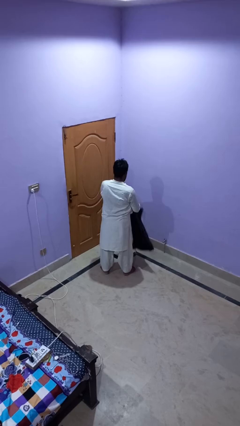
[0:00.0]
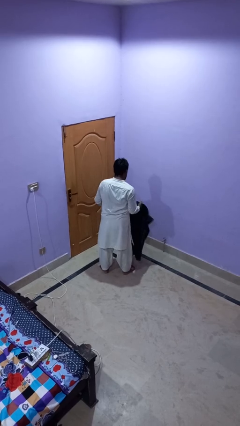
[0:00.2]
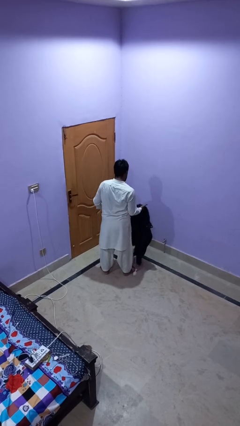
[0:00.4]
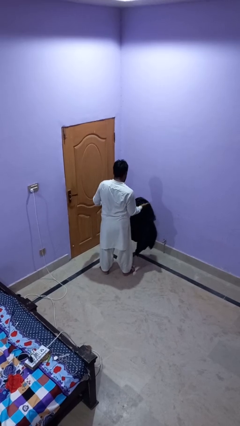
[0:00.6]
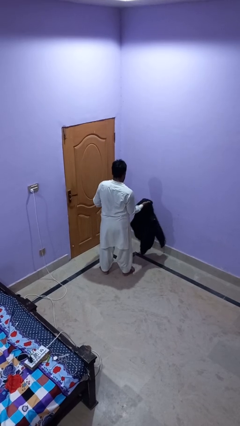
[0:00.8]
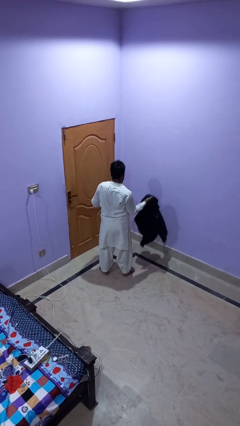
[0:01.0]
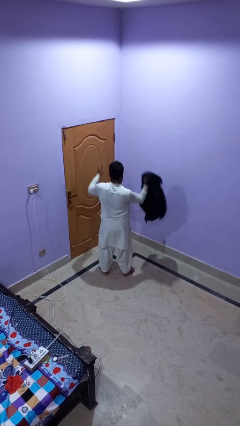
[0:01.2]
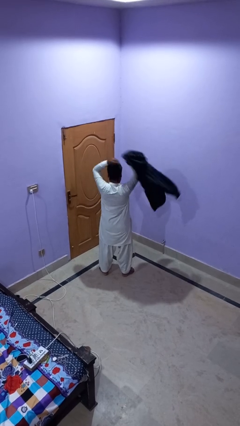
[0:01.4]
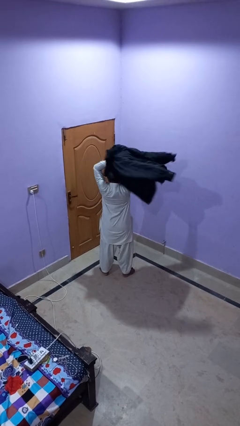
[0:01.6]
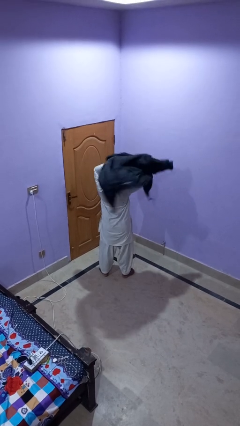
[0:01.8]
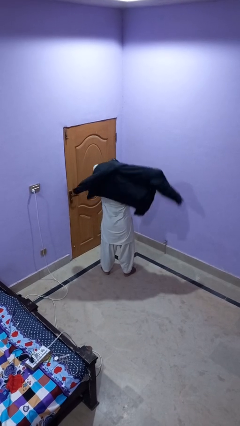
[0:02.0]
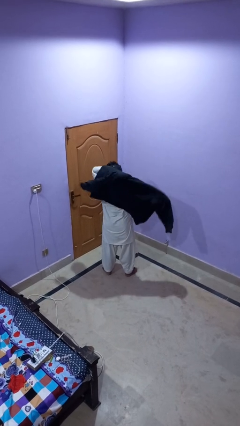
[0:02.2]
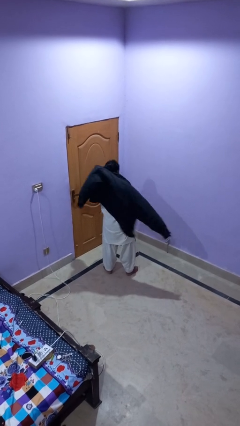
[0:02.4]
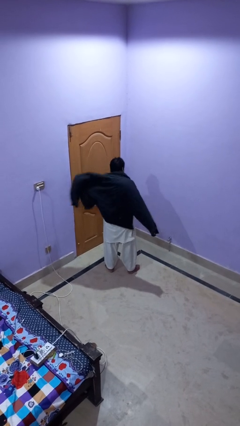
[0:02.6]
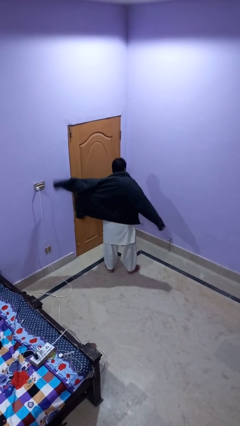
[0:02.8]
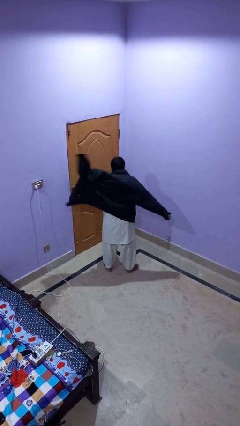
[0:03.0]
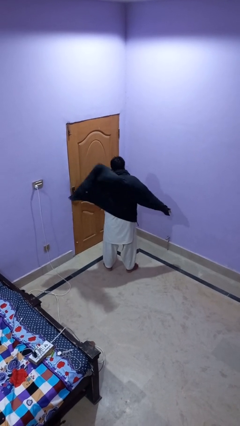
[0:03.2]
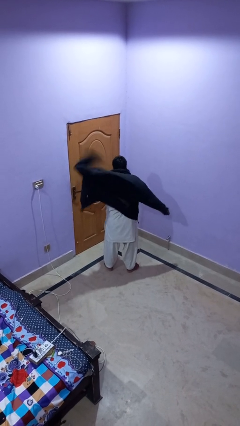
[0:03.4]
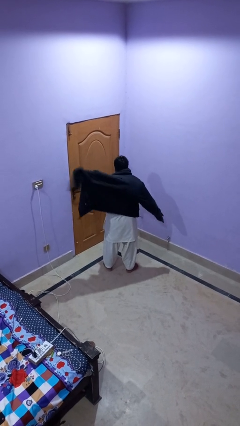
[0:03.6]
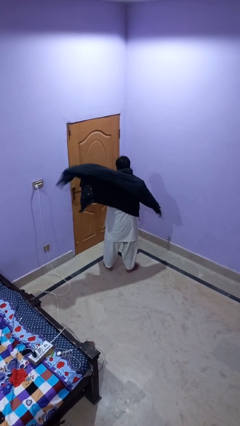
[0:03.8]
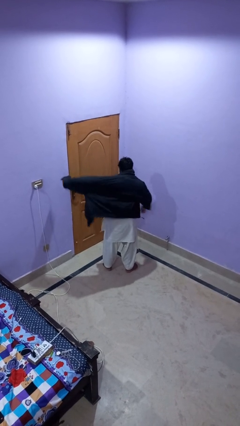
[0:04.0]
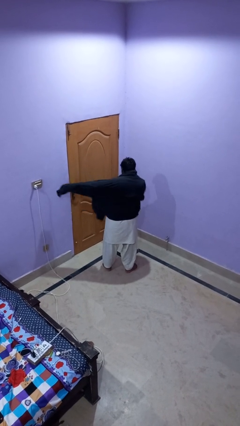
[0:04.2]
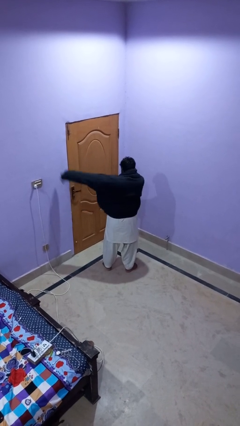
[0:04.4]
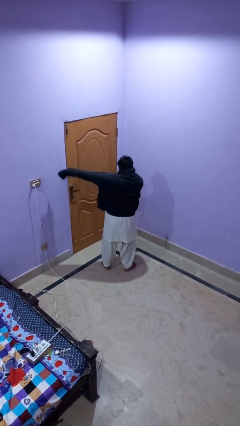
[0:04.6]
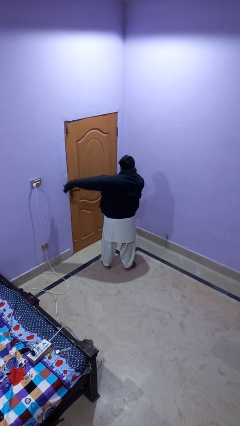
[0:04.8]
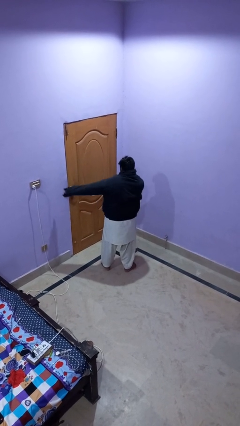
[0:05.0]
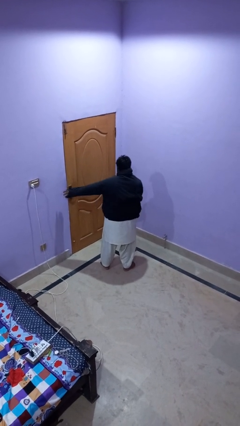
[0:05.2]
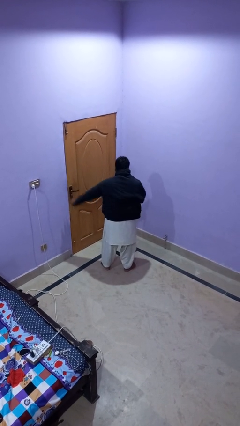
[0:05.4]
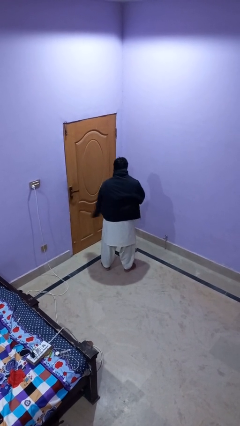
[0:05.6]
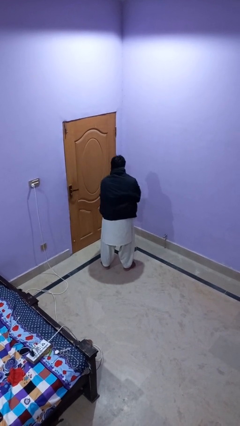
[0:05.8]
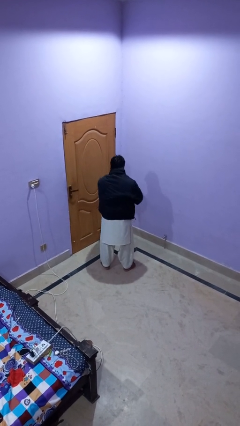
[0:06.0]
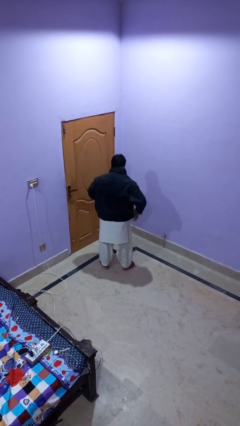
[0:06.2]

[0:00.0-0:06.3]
person puts on jacket

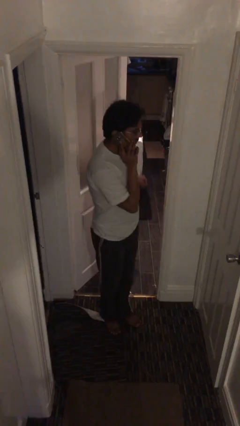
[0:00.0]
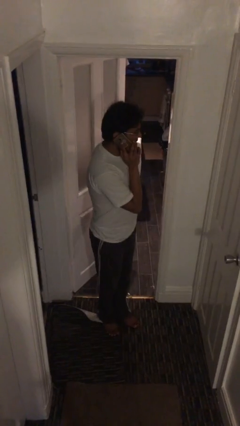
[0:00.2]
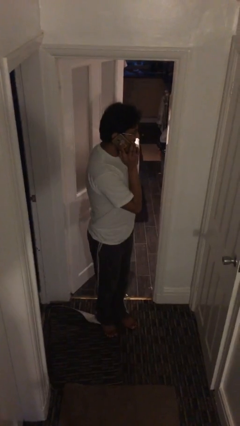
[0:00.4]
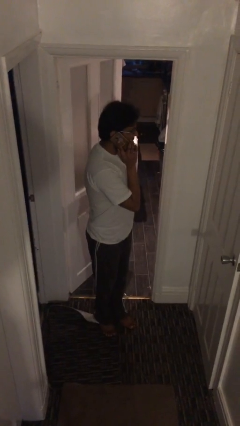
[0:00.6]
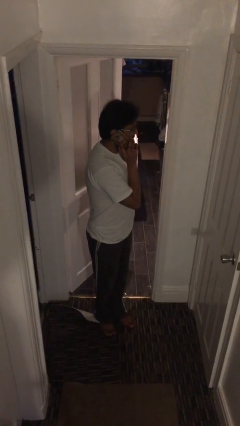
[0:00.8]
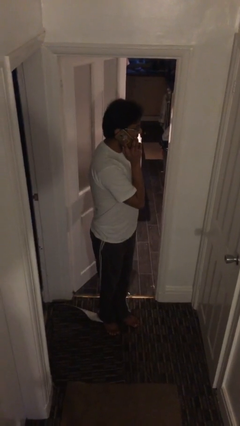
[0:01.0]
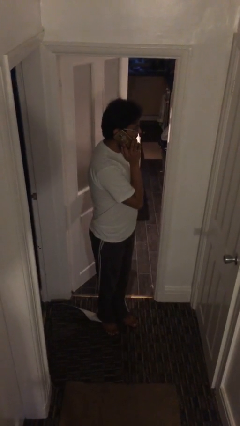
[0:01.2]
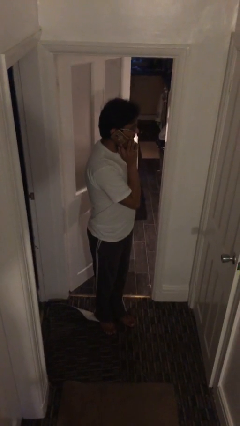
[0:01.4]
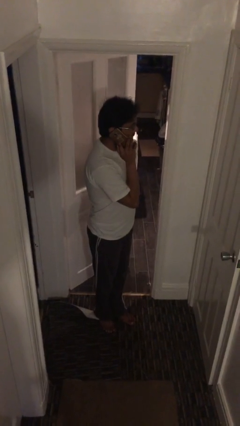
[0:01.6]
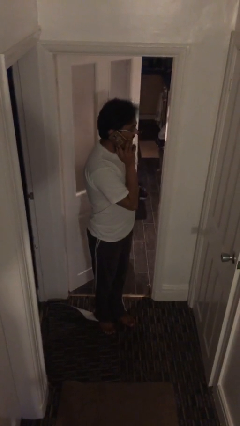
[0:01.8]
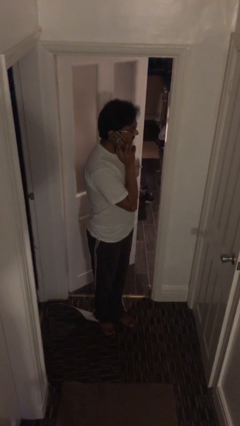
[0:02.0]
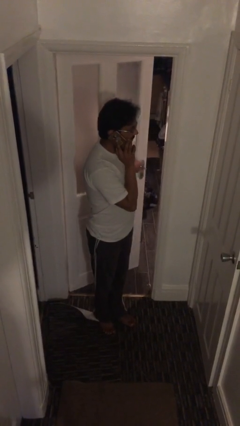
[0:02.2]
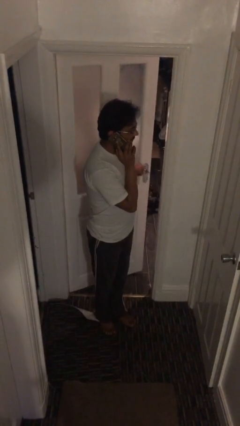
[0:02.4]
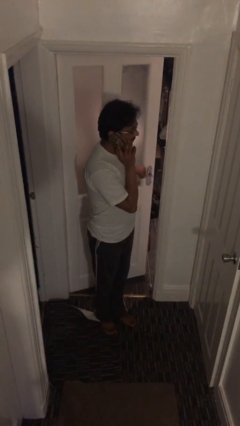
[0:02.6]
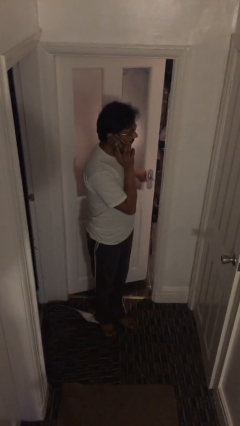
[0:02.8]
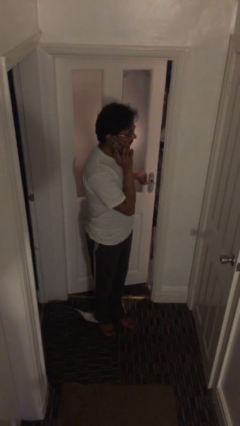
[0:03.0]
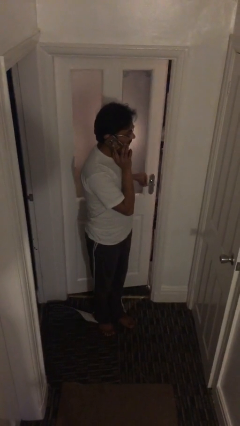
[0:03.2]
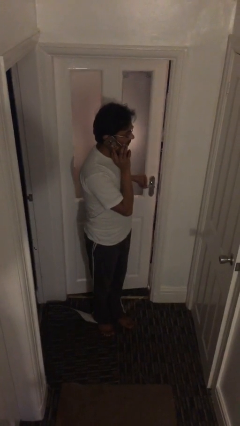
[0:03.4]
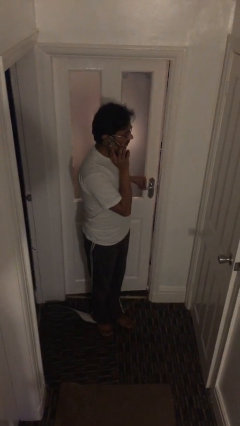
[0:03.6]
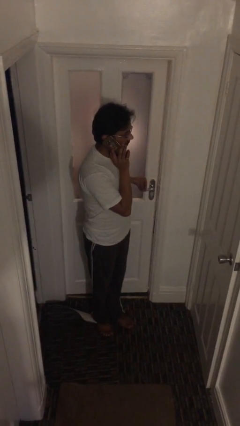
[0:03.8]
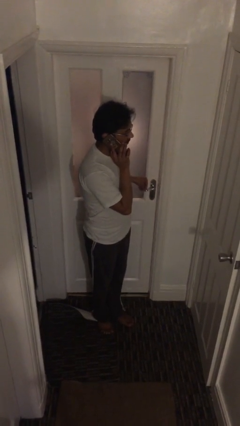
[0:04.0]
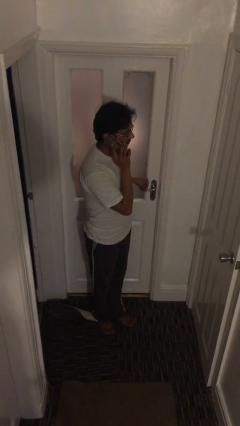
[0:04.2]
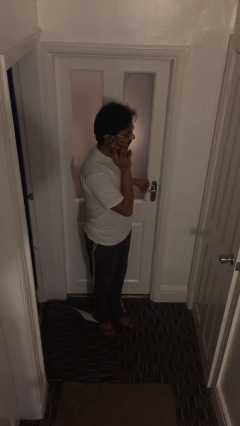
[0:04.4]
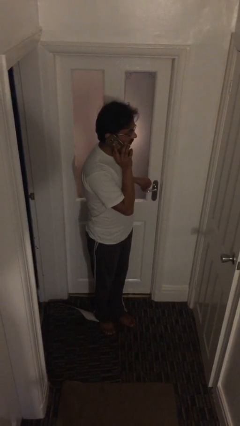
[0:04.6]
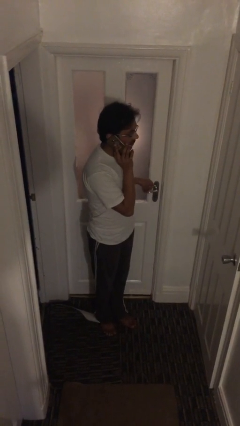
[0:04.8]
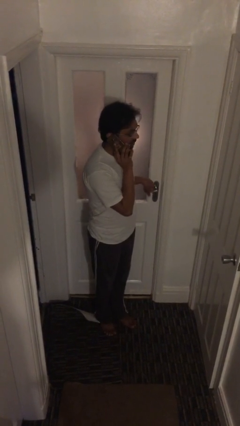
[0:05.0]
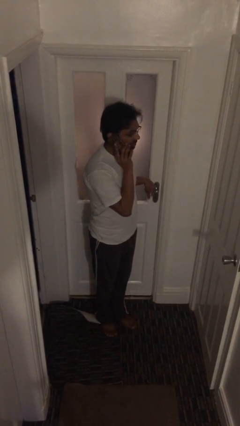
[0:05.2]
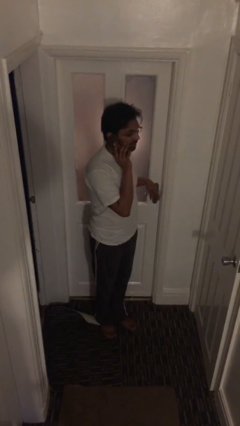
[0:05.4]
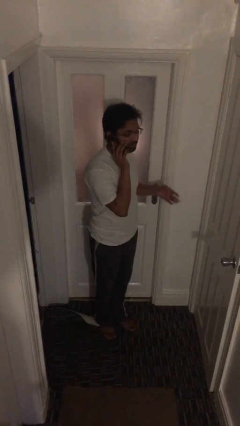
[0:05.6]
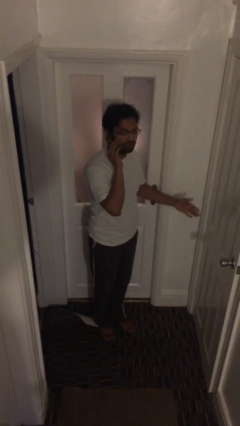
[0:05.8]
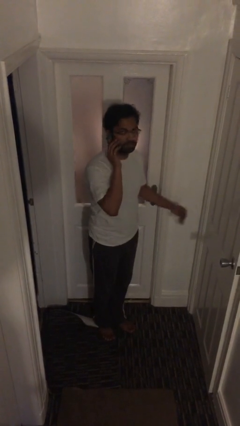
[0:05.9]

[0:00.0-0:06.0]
person closes facility door

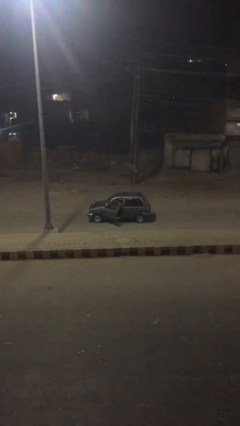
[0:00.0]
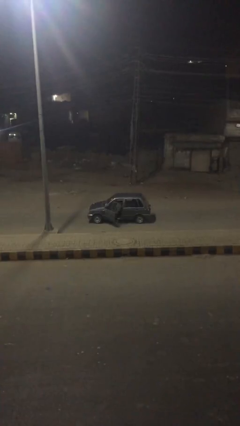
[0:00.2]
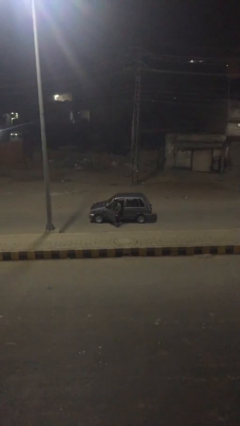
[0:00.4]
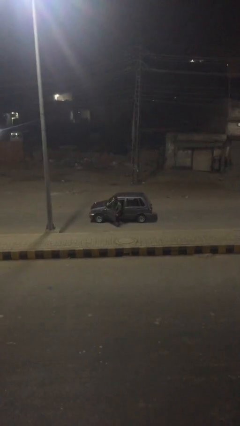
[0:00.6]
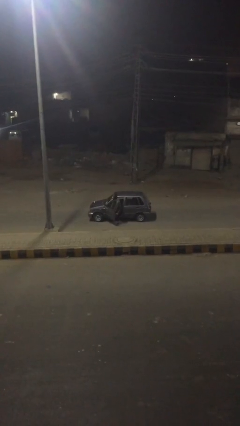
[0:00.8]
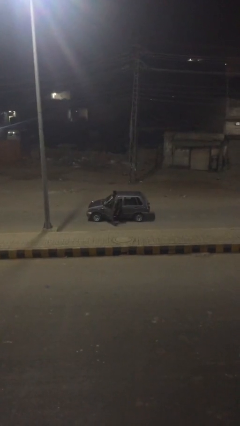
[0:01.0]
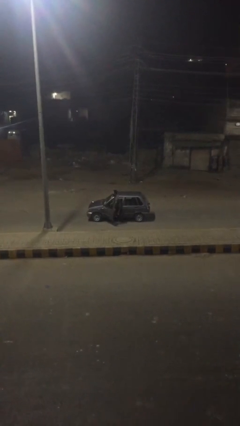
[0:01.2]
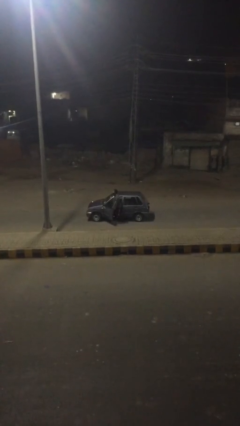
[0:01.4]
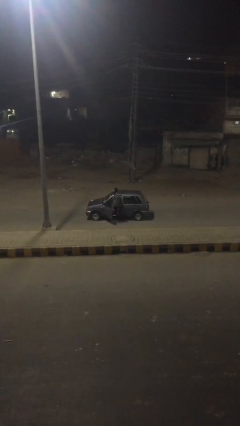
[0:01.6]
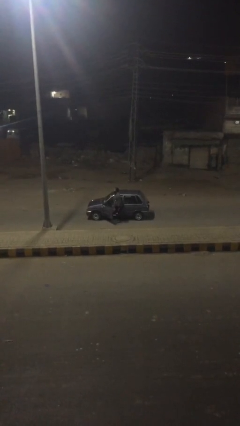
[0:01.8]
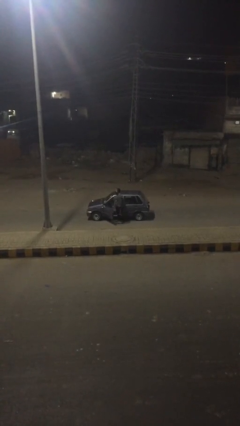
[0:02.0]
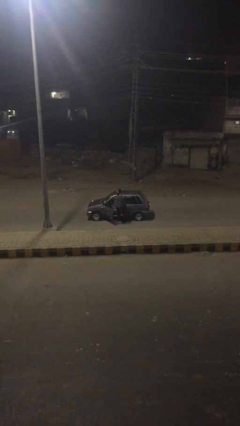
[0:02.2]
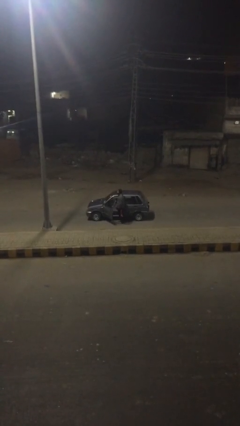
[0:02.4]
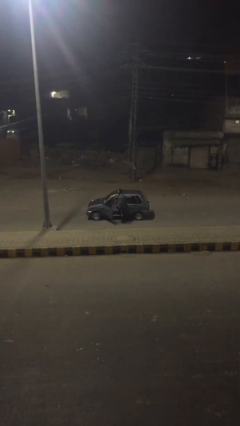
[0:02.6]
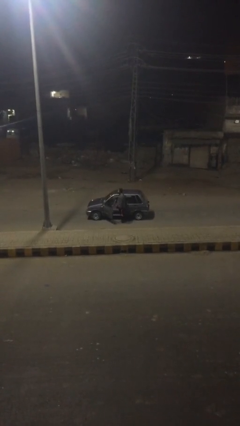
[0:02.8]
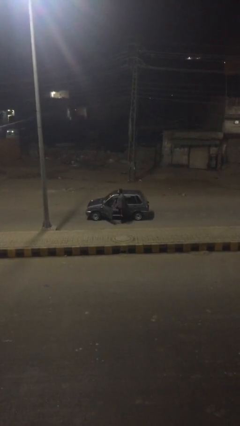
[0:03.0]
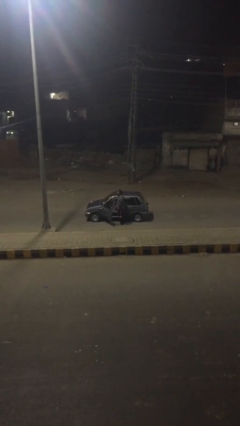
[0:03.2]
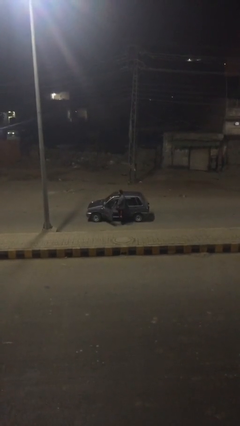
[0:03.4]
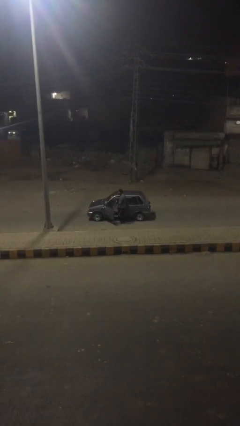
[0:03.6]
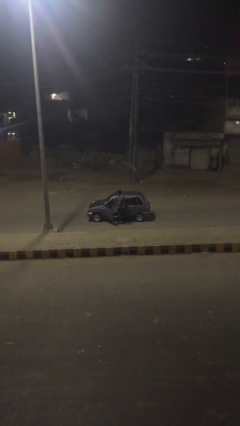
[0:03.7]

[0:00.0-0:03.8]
person exits car

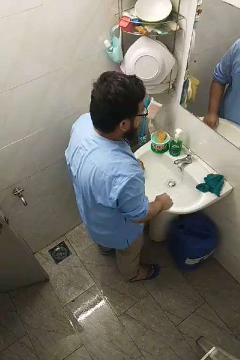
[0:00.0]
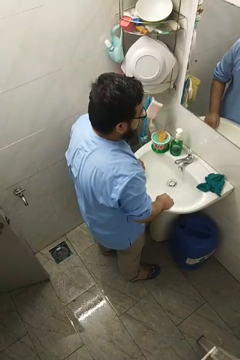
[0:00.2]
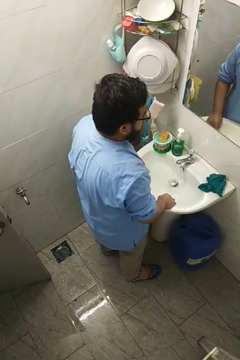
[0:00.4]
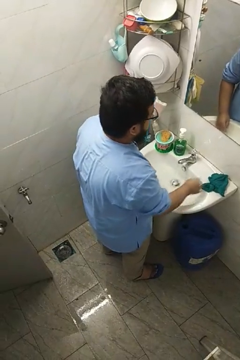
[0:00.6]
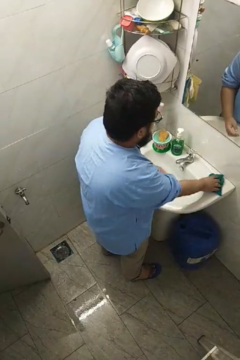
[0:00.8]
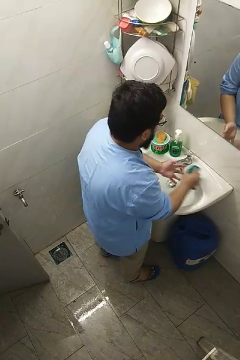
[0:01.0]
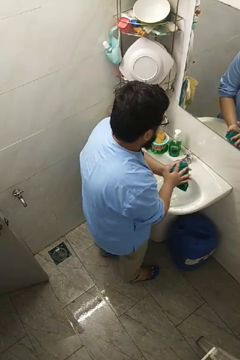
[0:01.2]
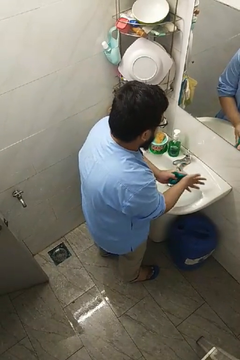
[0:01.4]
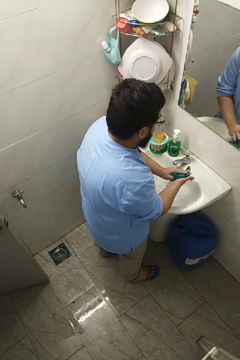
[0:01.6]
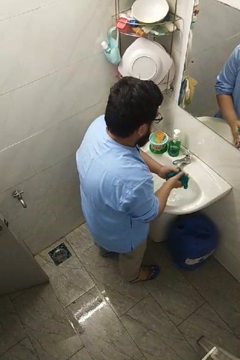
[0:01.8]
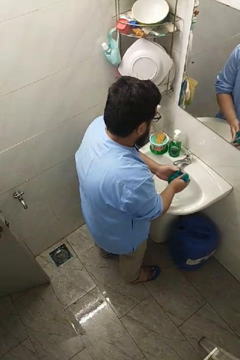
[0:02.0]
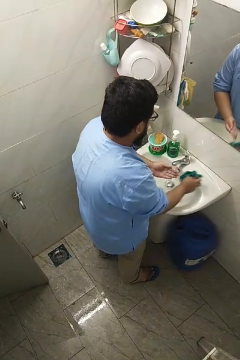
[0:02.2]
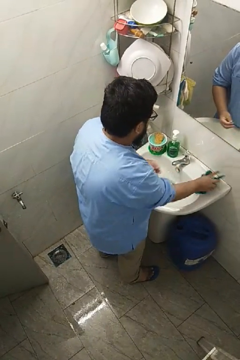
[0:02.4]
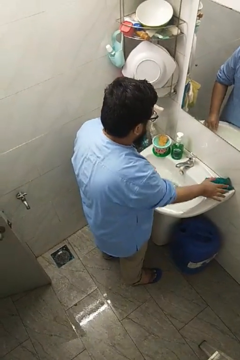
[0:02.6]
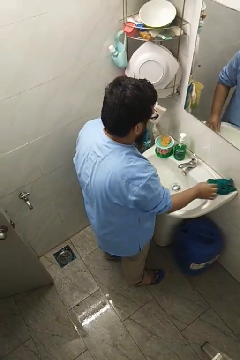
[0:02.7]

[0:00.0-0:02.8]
person dries hands with towel
